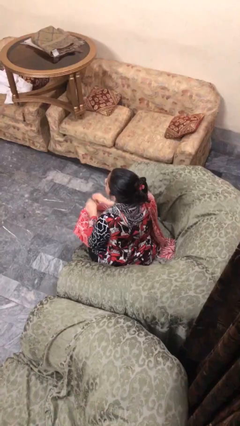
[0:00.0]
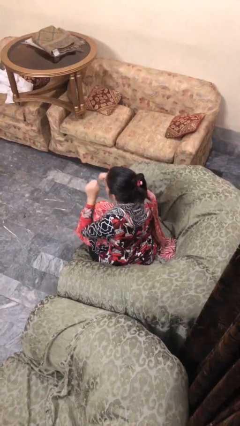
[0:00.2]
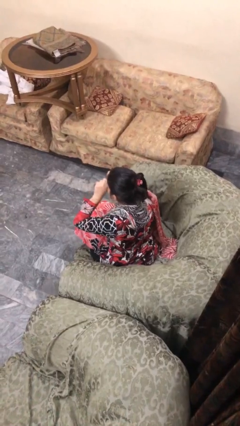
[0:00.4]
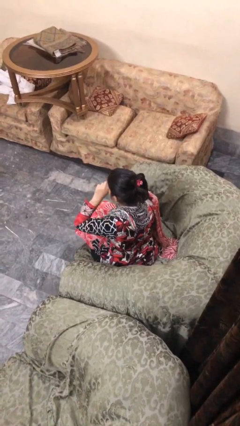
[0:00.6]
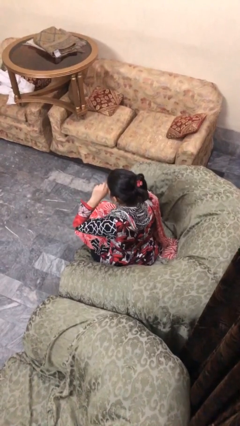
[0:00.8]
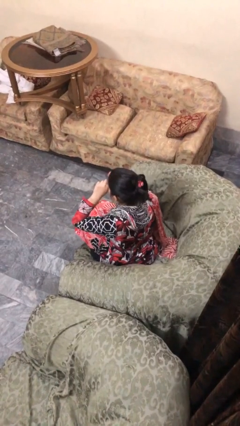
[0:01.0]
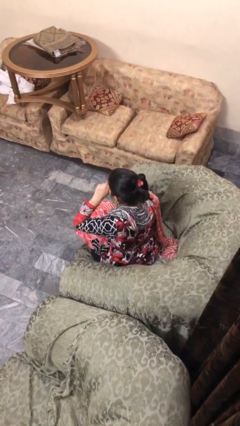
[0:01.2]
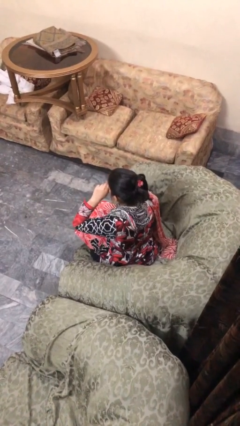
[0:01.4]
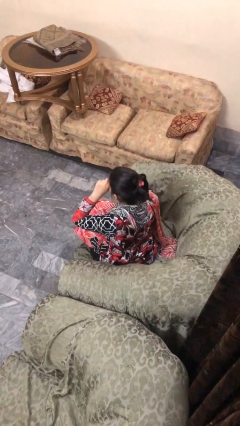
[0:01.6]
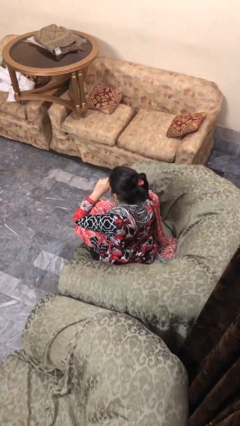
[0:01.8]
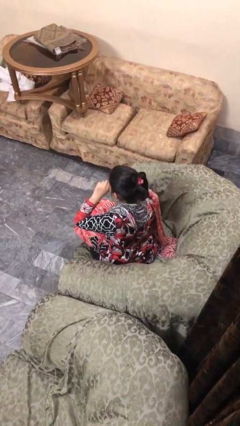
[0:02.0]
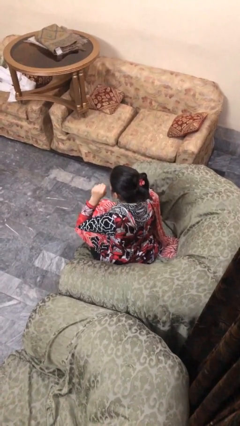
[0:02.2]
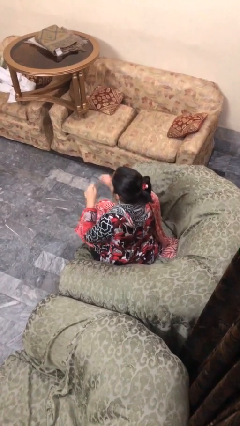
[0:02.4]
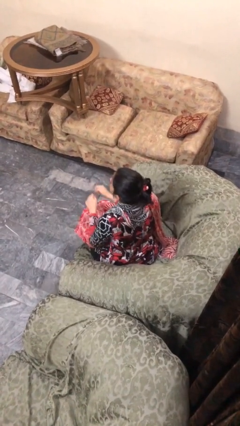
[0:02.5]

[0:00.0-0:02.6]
person rubs eyes

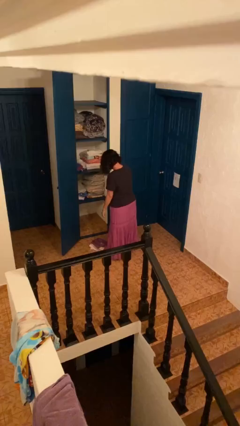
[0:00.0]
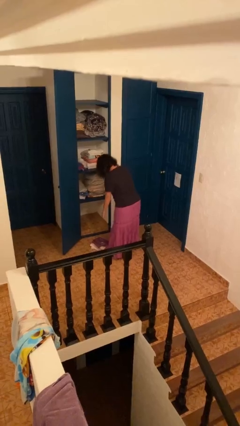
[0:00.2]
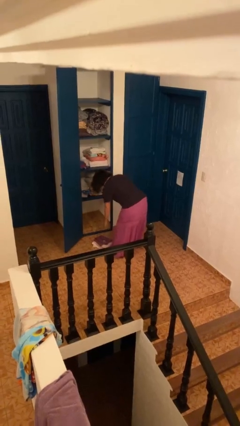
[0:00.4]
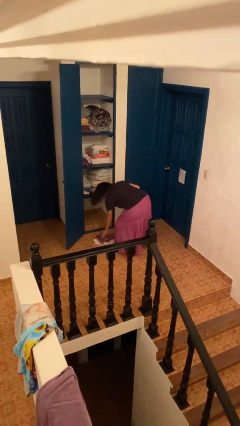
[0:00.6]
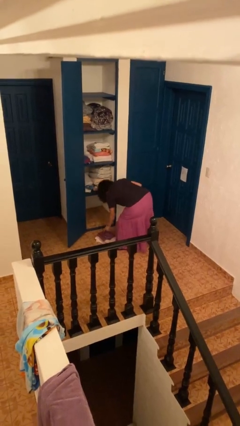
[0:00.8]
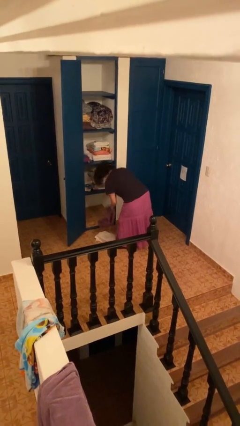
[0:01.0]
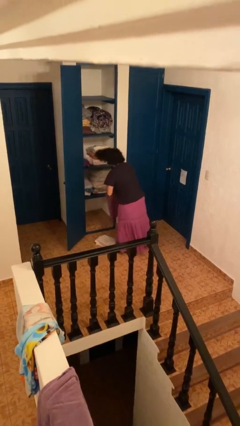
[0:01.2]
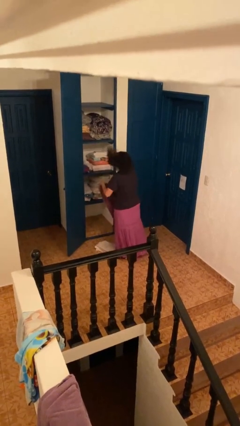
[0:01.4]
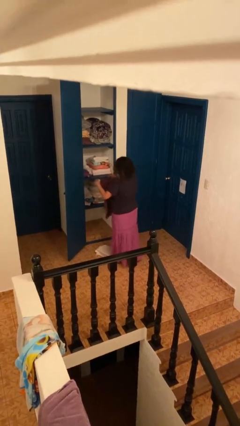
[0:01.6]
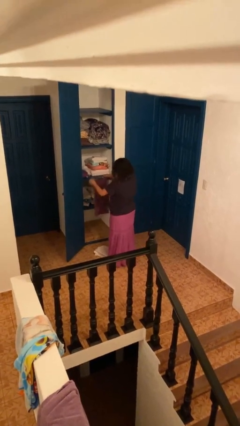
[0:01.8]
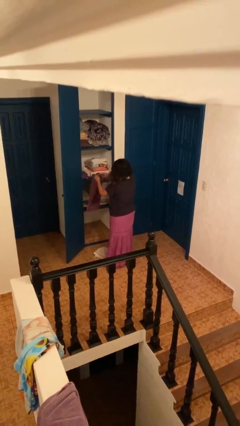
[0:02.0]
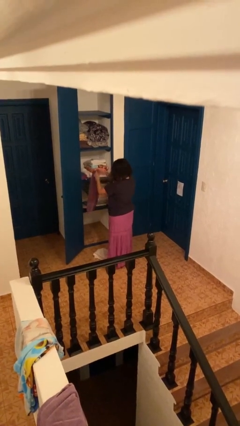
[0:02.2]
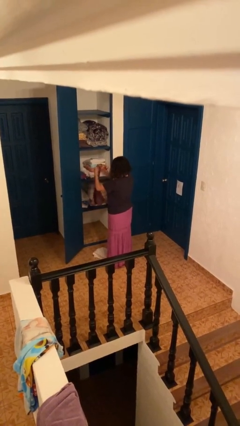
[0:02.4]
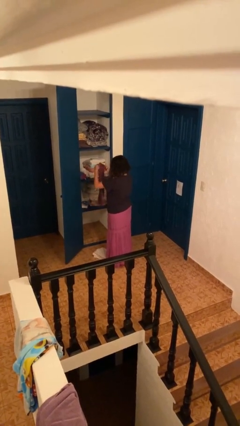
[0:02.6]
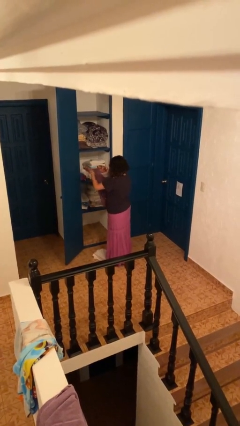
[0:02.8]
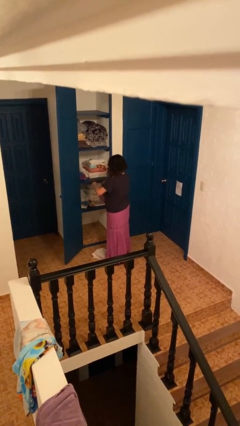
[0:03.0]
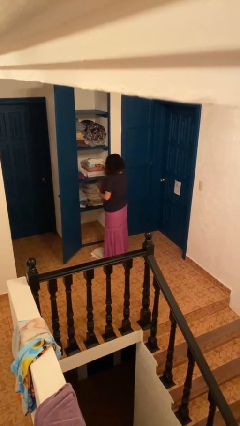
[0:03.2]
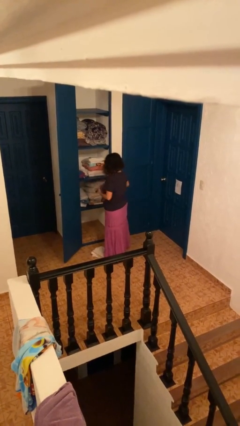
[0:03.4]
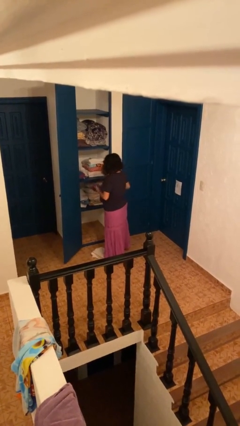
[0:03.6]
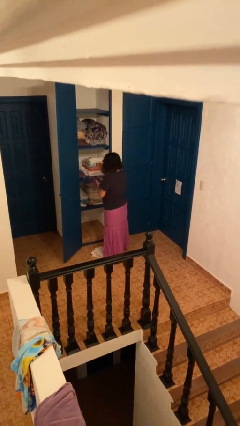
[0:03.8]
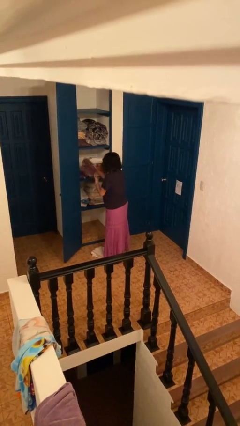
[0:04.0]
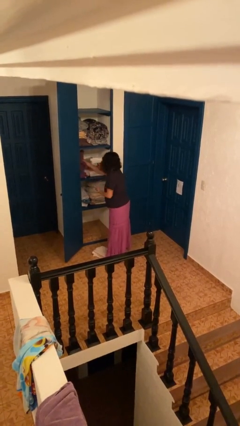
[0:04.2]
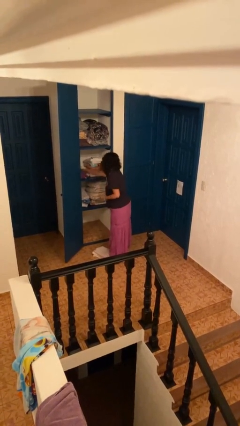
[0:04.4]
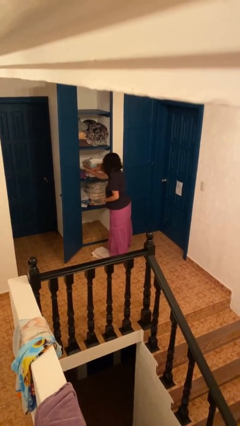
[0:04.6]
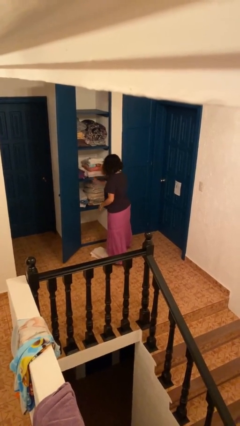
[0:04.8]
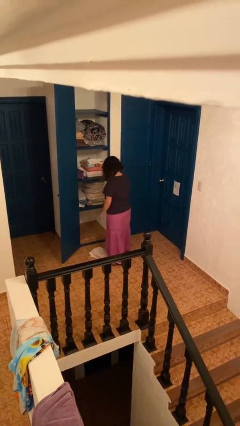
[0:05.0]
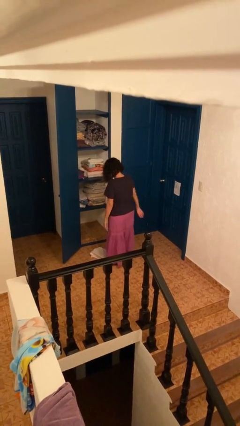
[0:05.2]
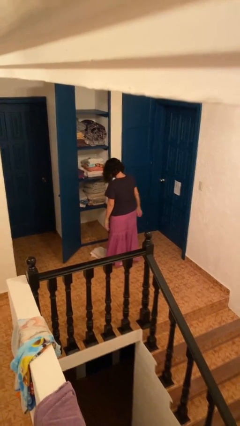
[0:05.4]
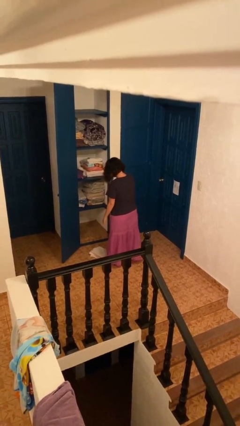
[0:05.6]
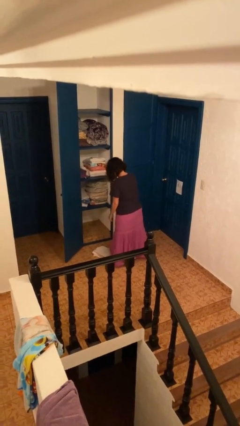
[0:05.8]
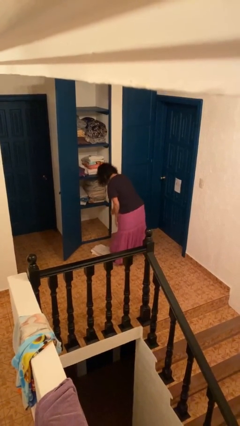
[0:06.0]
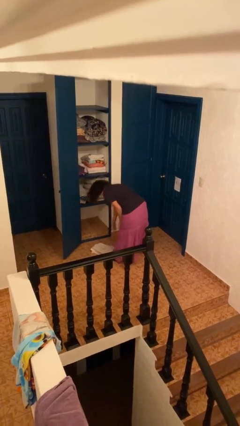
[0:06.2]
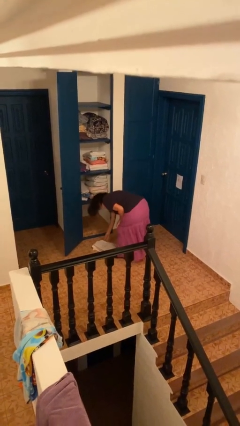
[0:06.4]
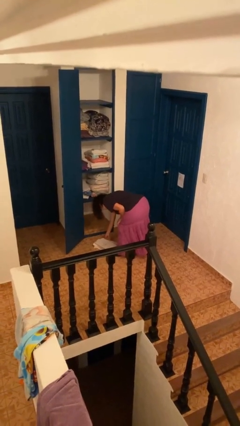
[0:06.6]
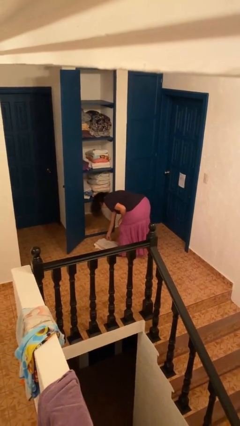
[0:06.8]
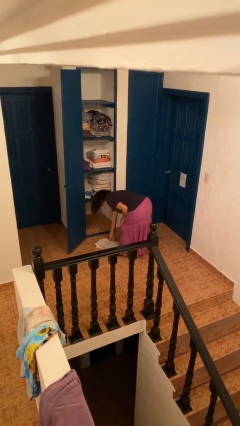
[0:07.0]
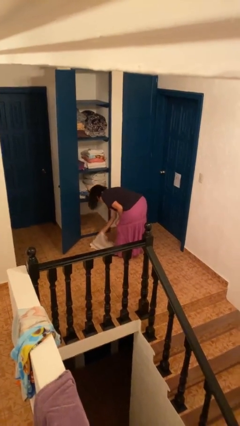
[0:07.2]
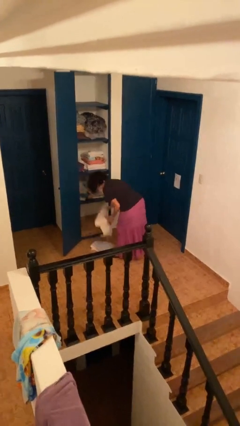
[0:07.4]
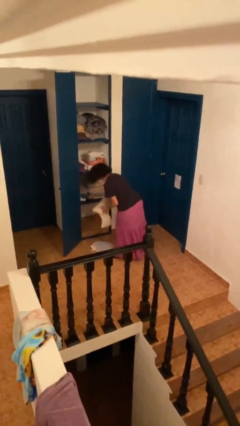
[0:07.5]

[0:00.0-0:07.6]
person folds towel

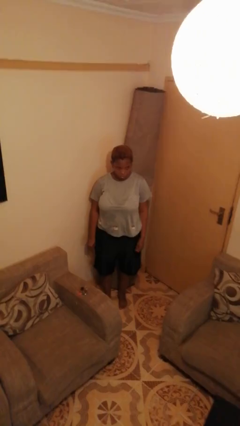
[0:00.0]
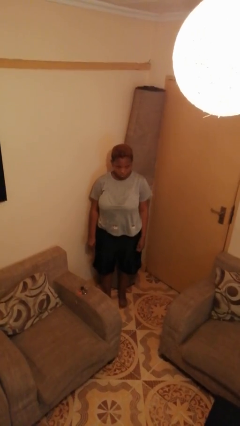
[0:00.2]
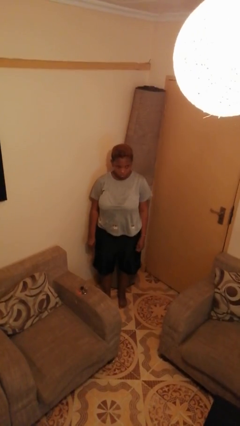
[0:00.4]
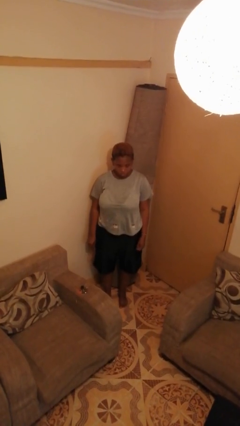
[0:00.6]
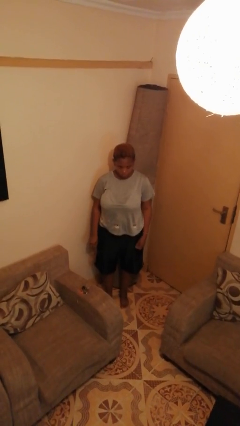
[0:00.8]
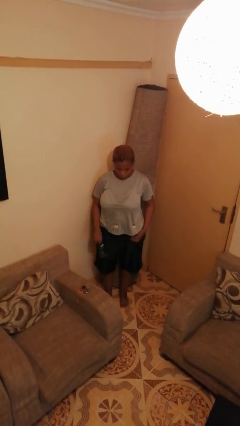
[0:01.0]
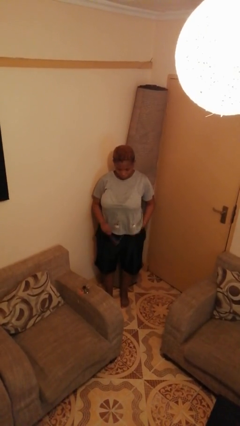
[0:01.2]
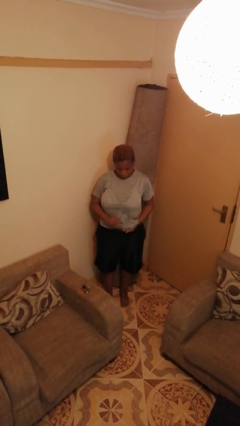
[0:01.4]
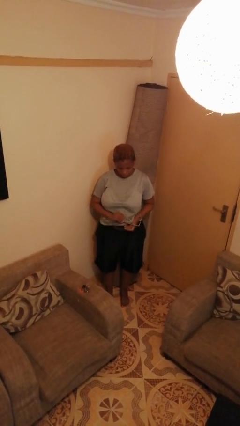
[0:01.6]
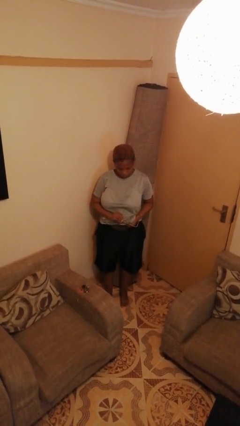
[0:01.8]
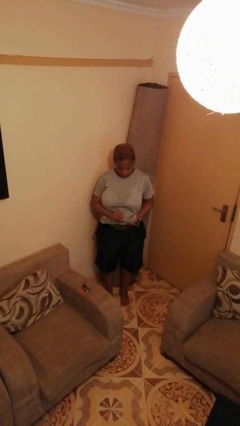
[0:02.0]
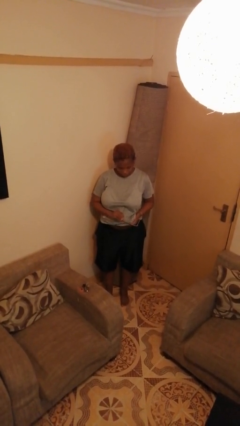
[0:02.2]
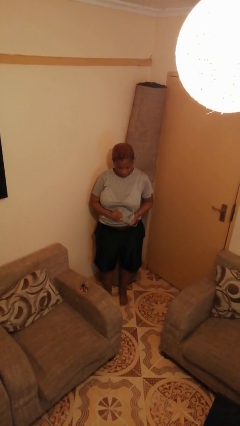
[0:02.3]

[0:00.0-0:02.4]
person cleans eyeglasses

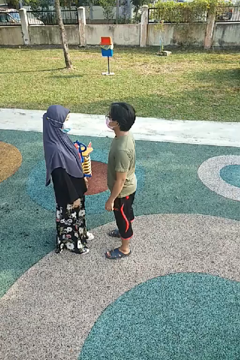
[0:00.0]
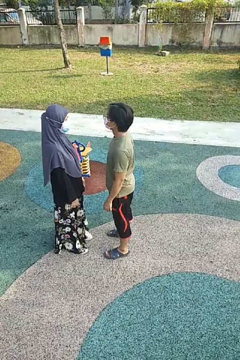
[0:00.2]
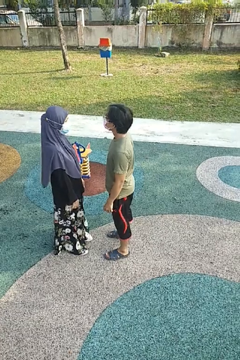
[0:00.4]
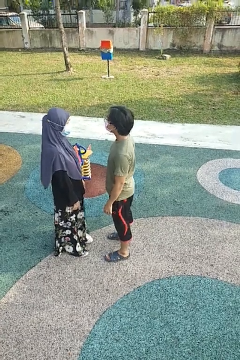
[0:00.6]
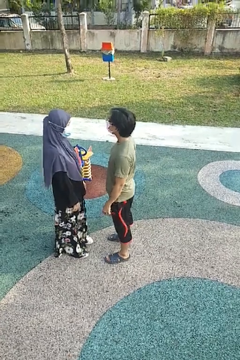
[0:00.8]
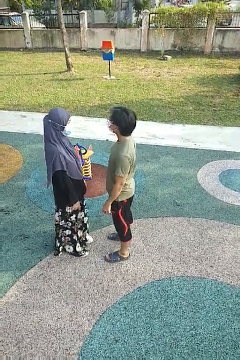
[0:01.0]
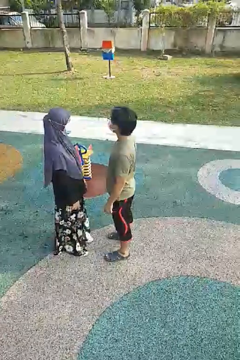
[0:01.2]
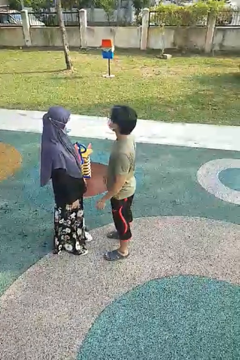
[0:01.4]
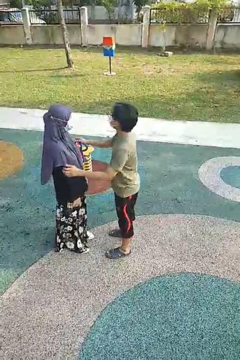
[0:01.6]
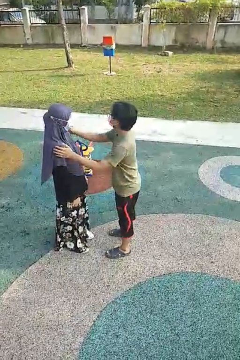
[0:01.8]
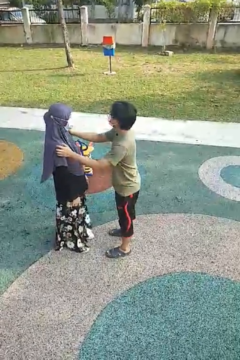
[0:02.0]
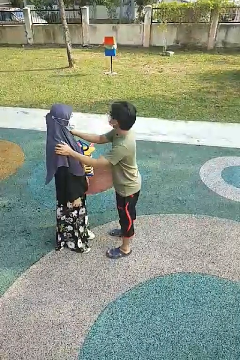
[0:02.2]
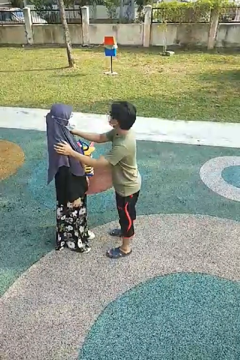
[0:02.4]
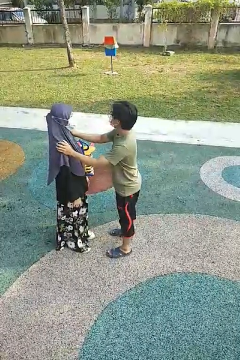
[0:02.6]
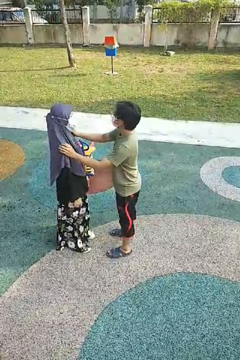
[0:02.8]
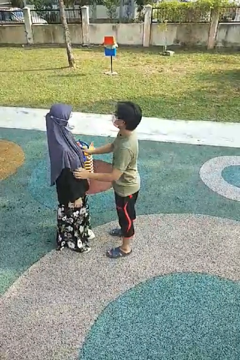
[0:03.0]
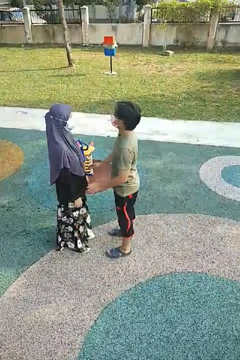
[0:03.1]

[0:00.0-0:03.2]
person pounds shoulders of person

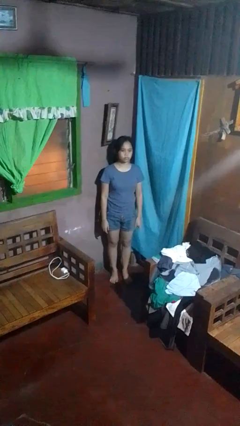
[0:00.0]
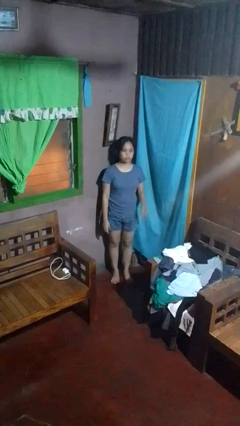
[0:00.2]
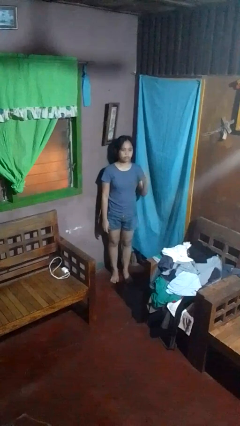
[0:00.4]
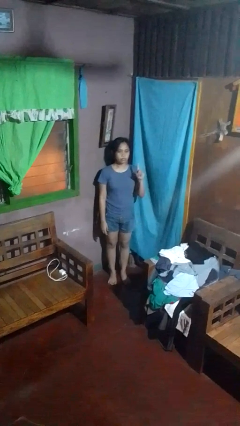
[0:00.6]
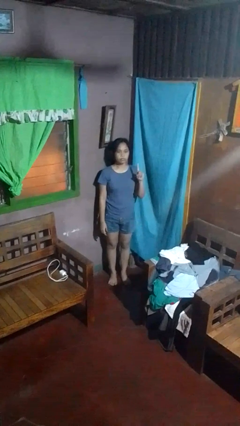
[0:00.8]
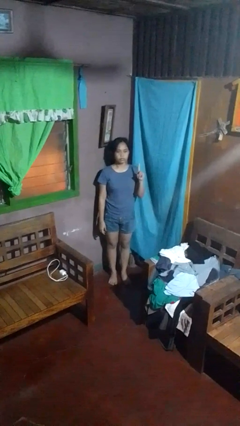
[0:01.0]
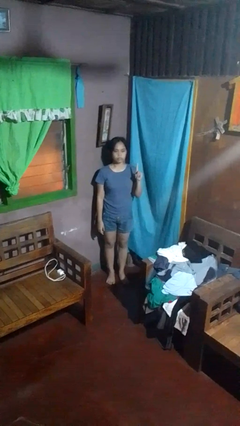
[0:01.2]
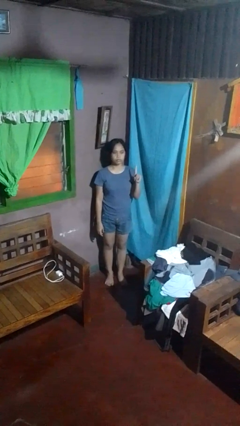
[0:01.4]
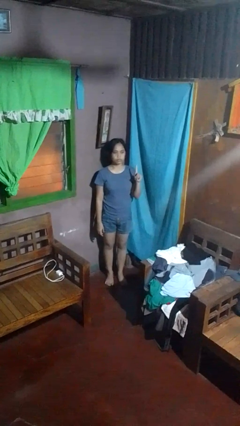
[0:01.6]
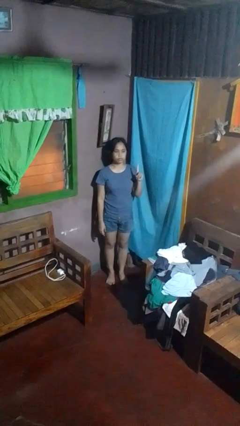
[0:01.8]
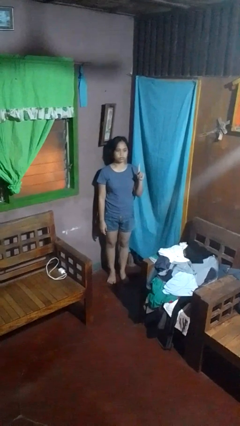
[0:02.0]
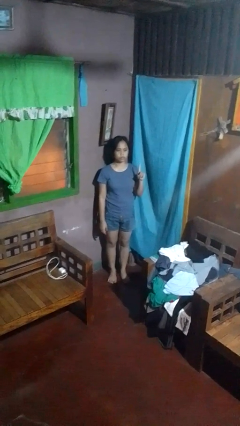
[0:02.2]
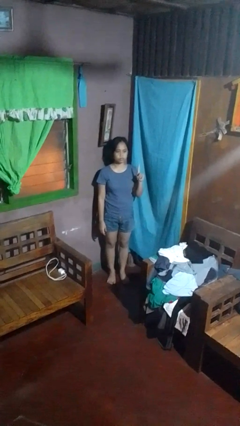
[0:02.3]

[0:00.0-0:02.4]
person gestures number one

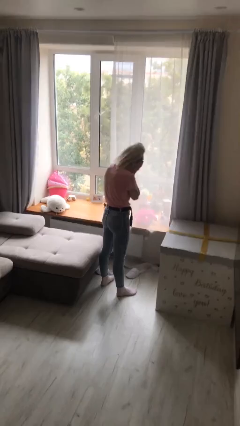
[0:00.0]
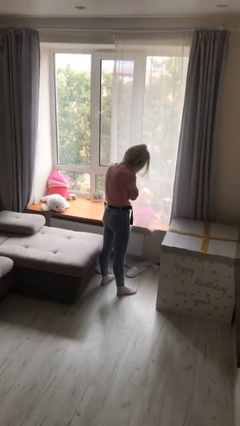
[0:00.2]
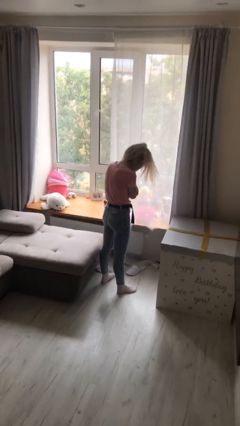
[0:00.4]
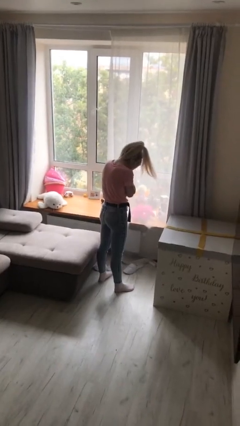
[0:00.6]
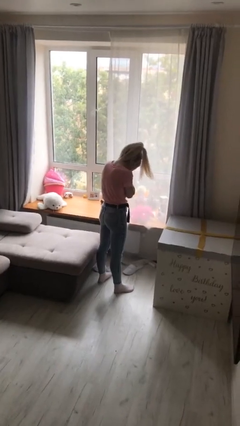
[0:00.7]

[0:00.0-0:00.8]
person covers face with hands
